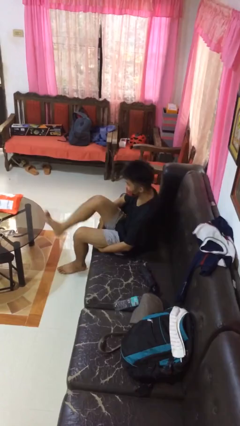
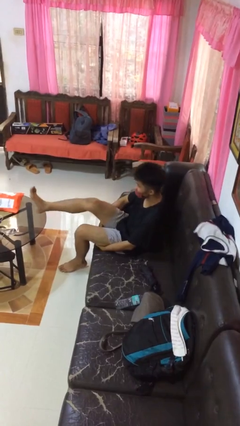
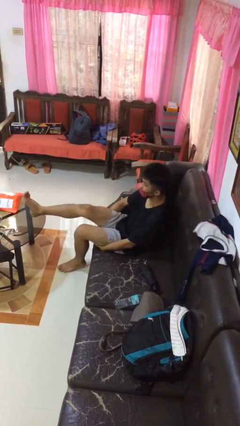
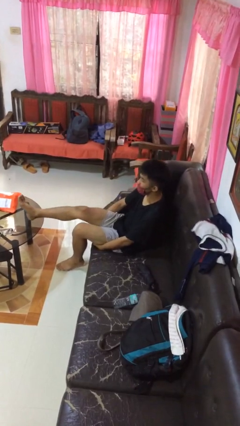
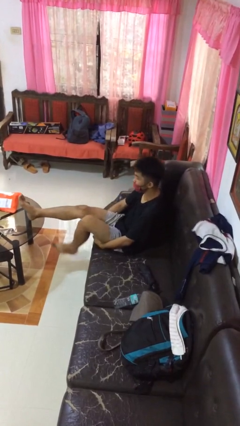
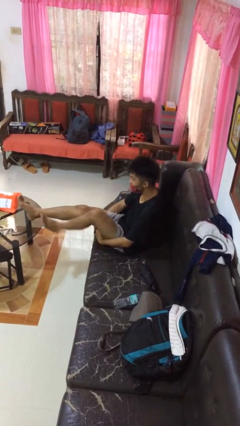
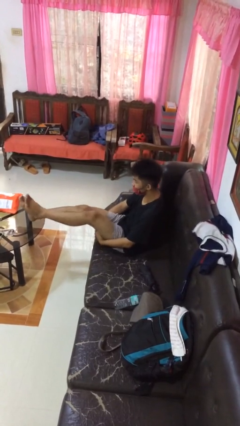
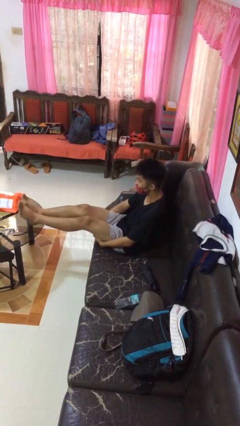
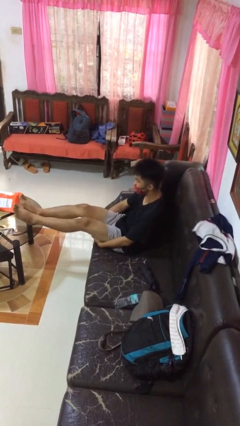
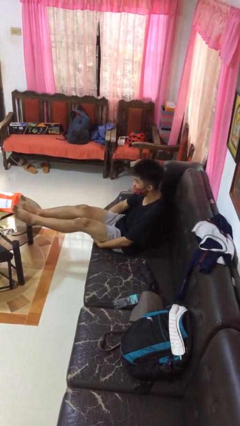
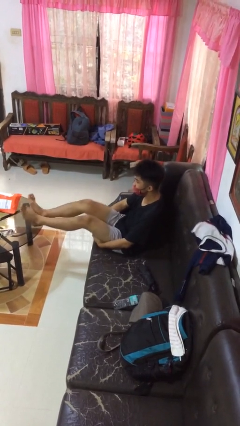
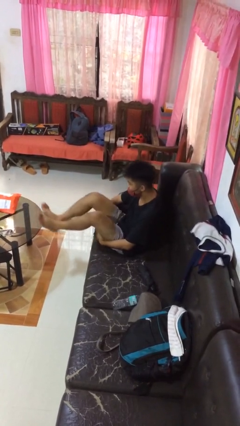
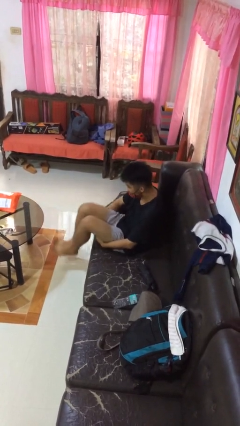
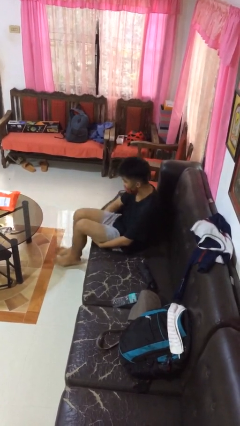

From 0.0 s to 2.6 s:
person puts feet up

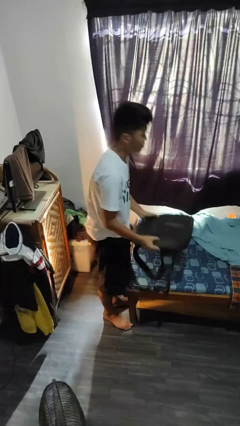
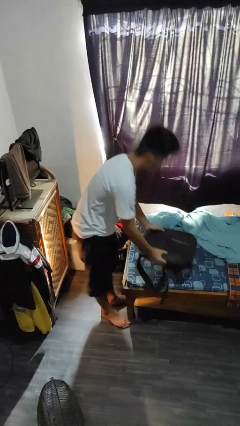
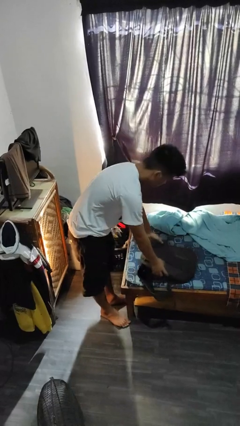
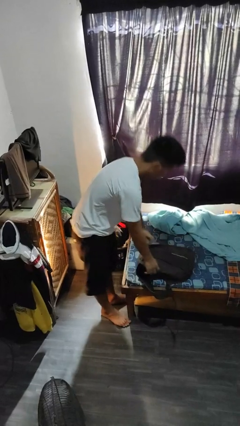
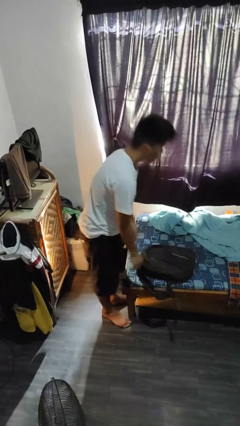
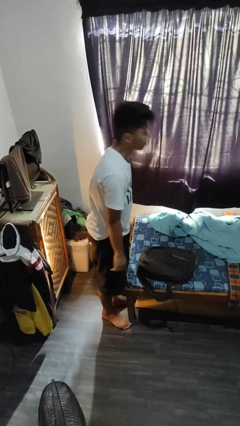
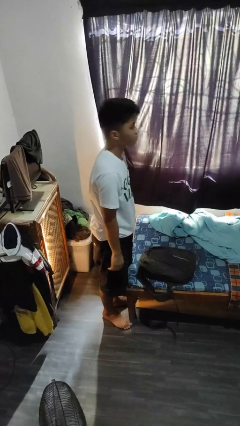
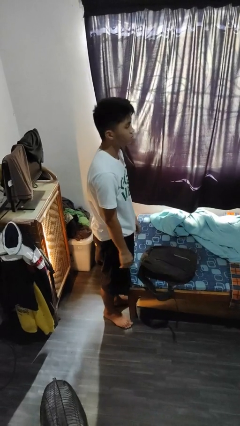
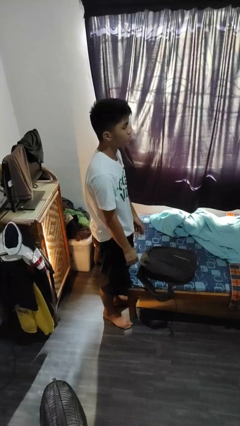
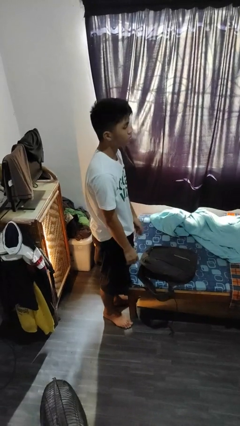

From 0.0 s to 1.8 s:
person puts down object on bed

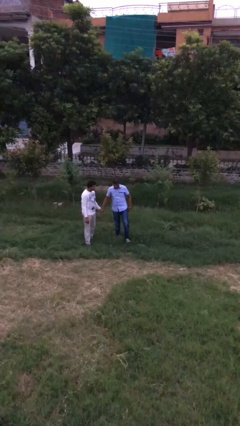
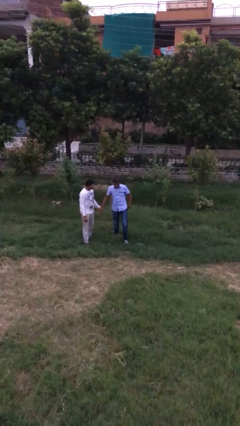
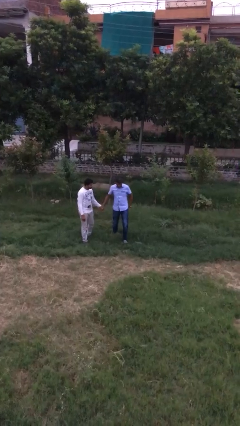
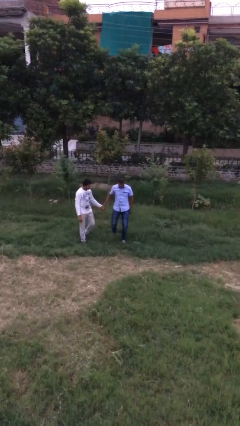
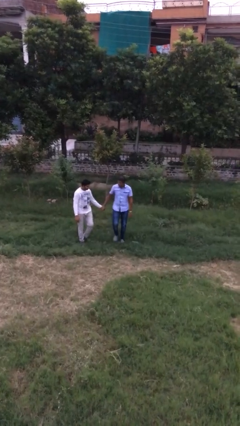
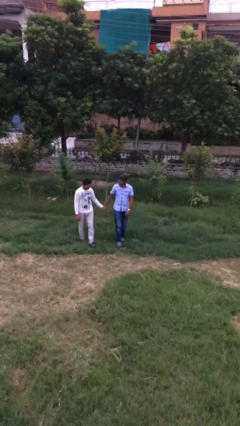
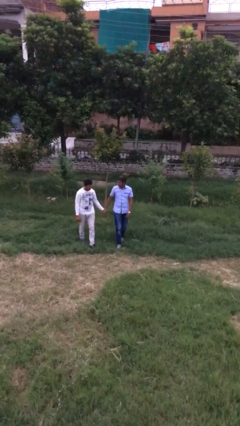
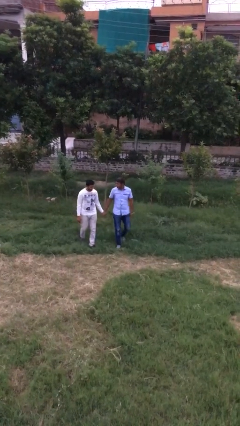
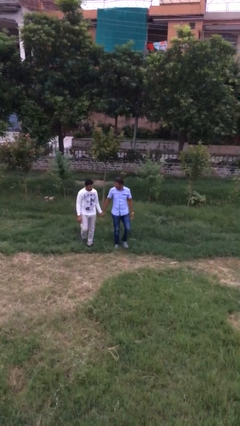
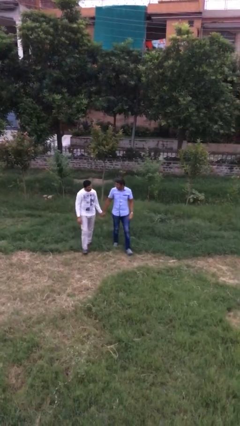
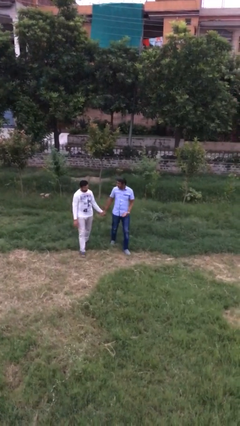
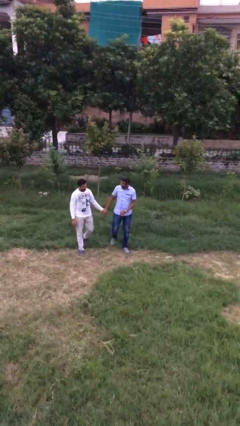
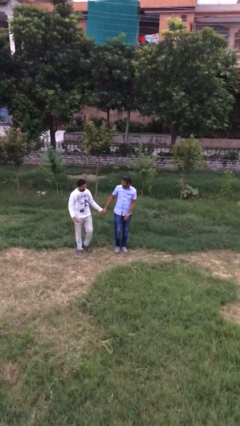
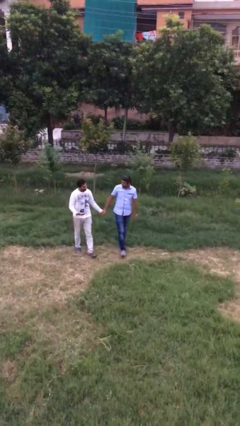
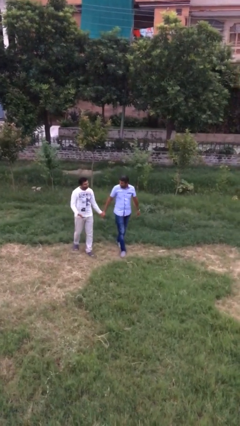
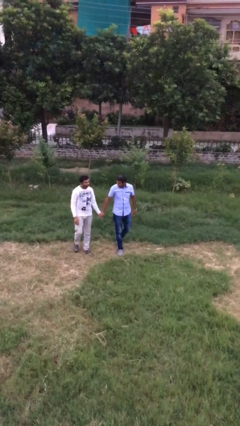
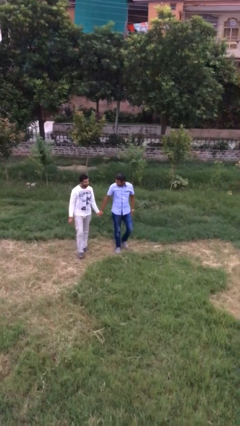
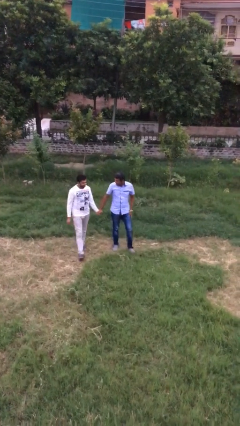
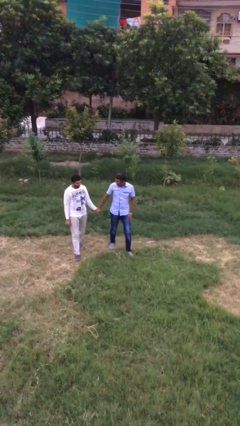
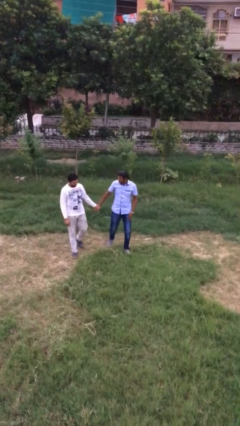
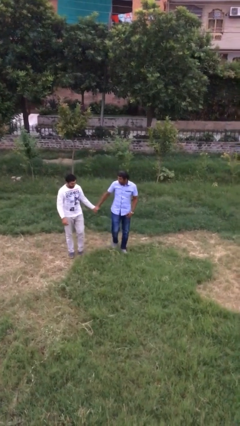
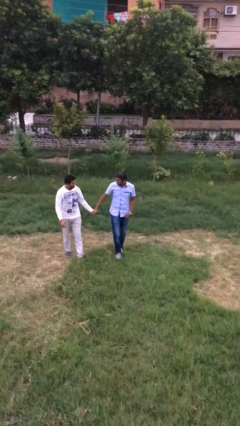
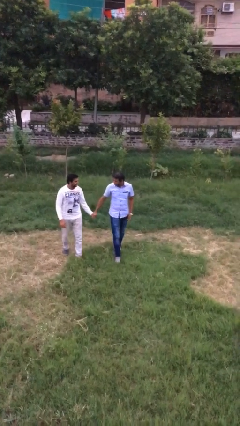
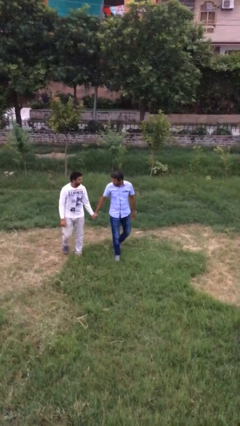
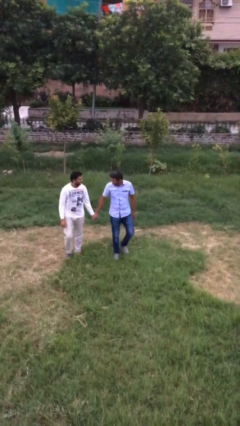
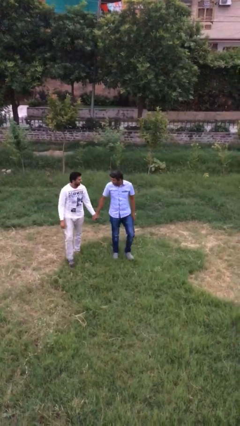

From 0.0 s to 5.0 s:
person holds hand

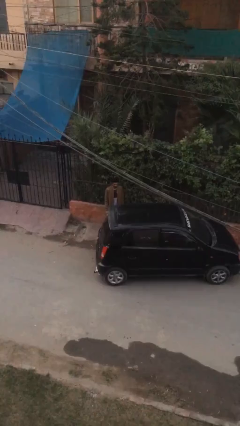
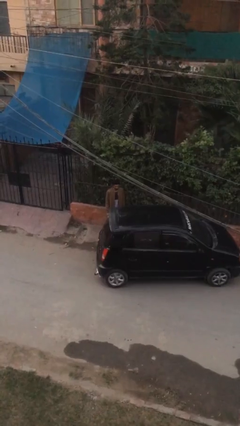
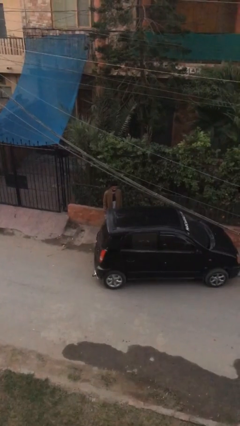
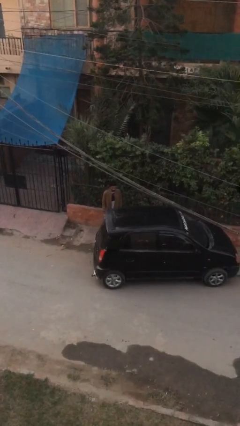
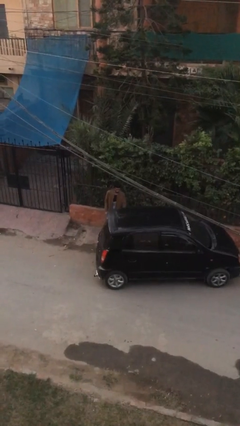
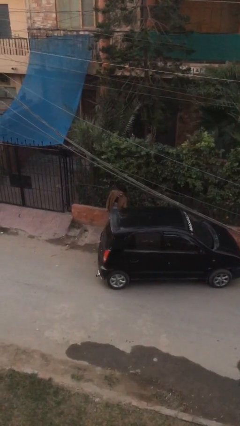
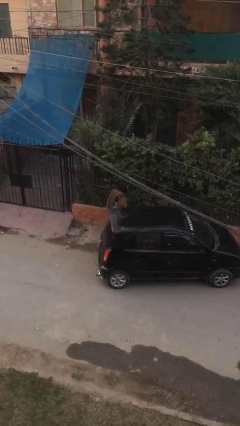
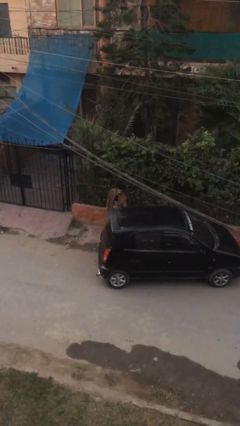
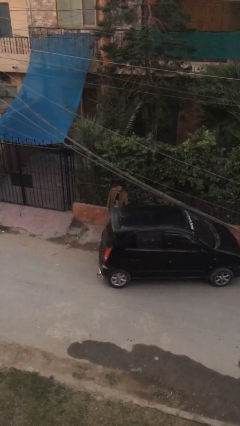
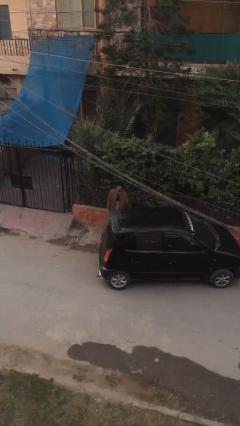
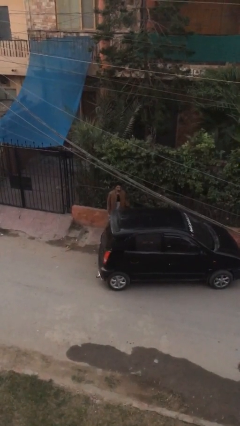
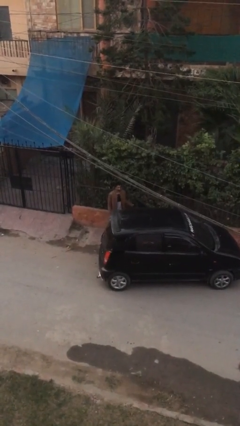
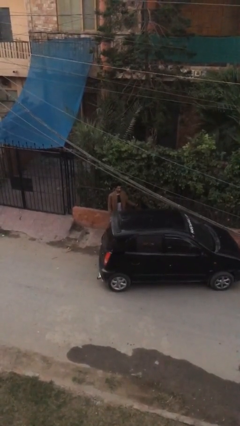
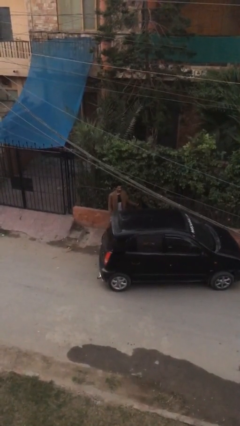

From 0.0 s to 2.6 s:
person opens car door

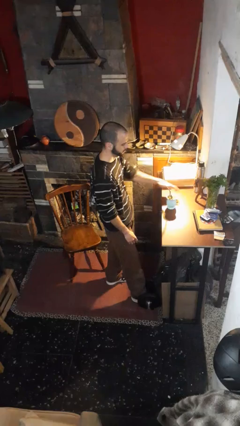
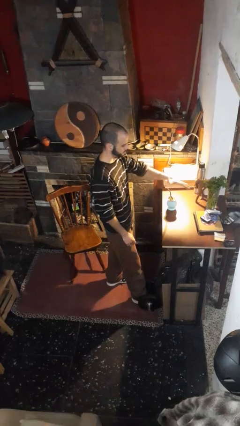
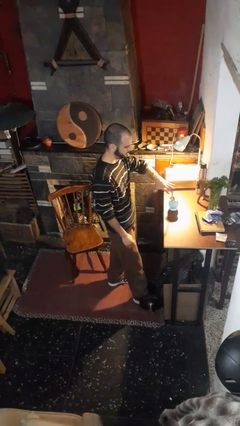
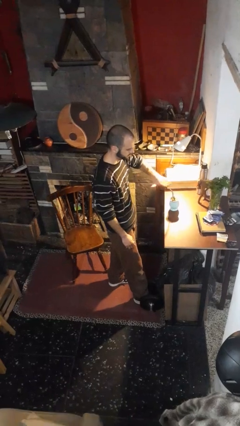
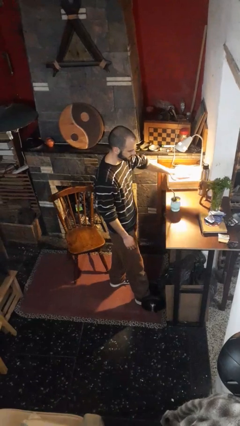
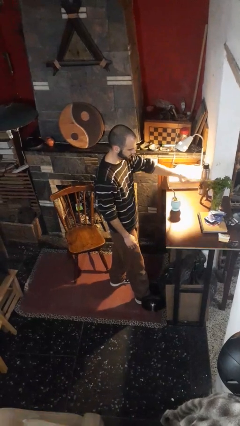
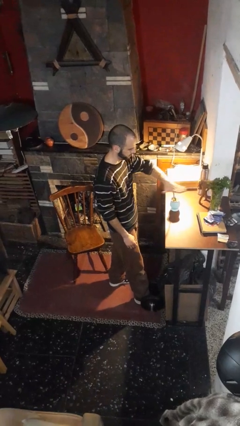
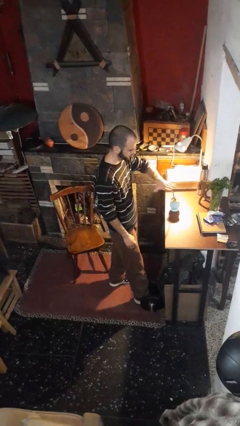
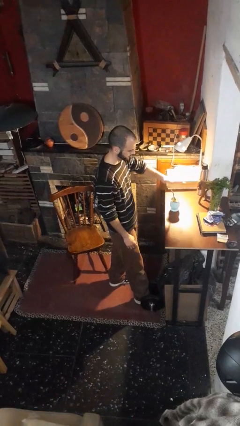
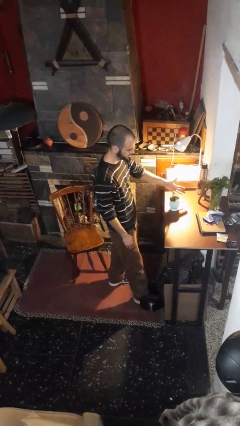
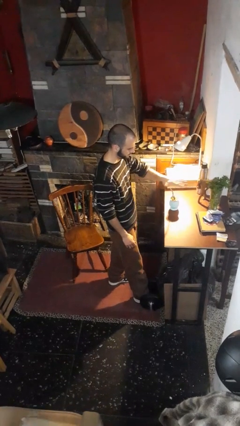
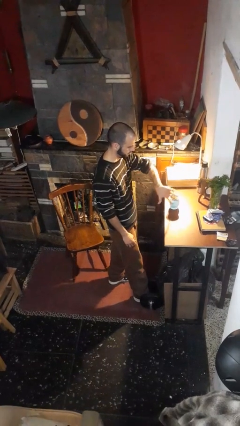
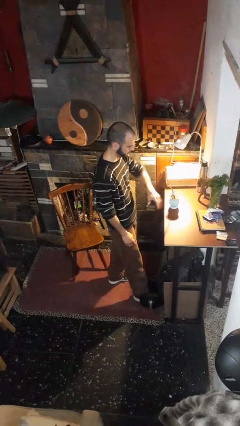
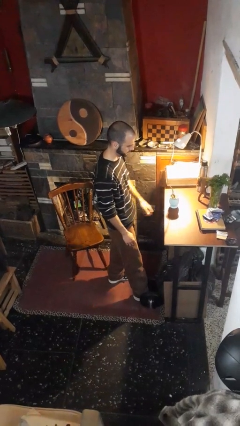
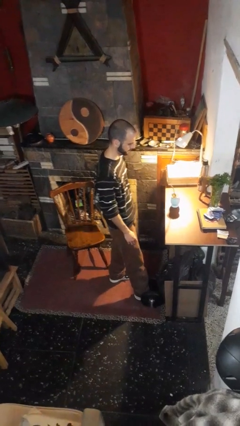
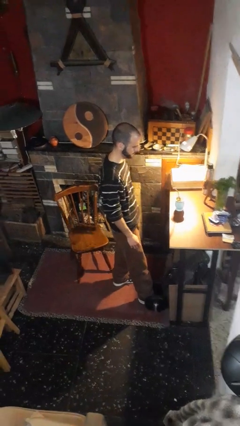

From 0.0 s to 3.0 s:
person waves hand over object

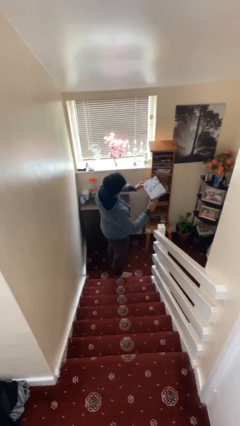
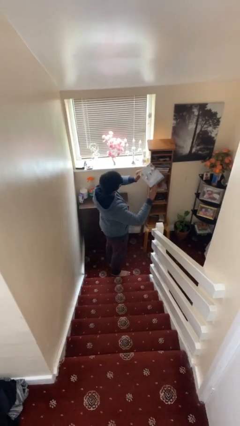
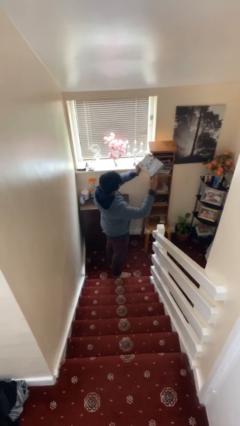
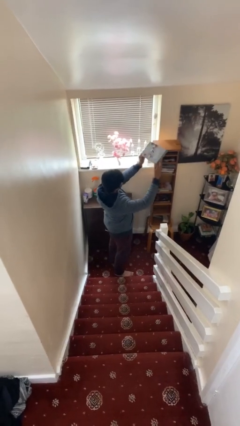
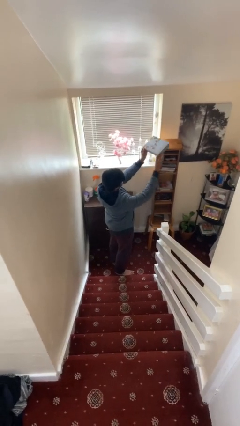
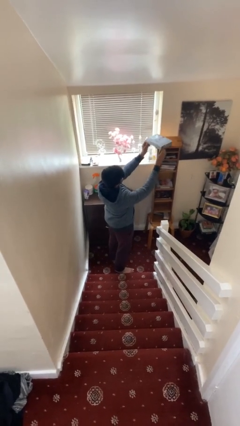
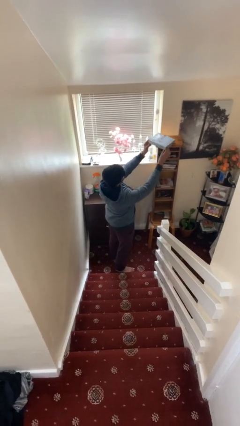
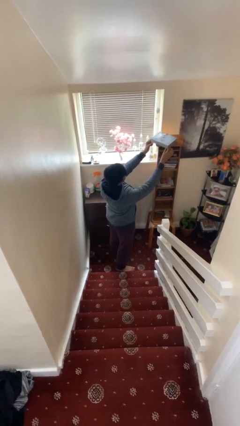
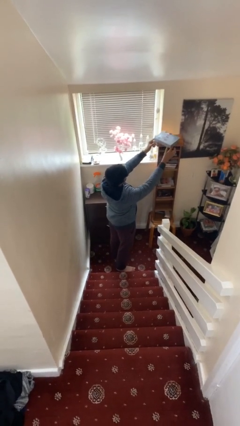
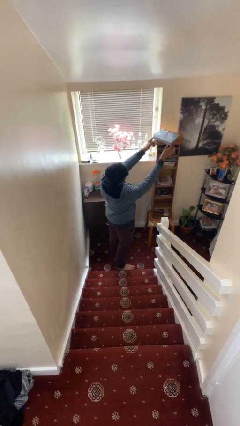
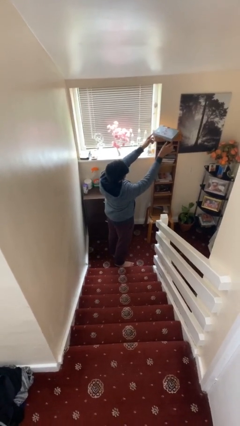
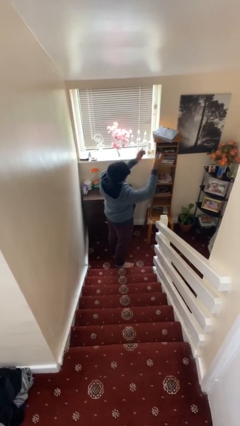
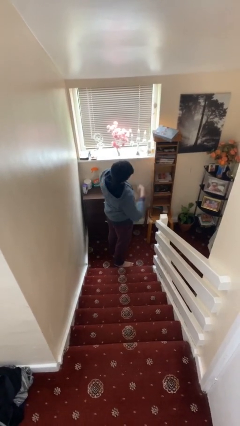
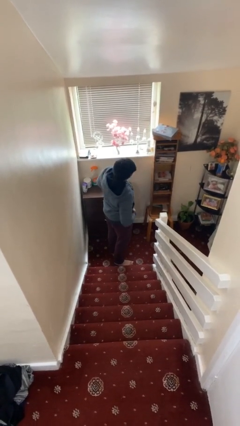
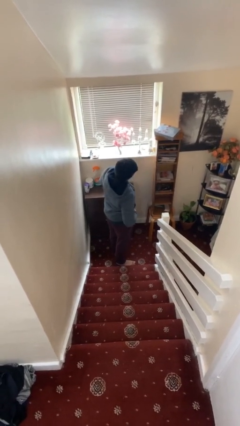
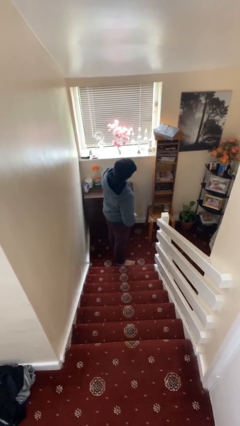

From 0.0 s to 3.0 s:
person puts down object on shelf
